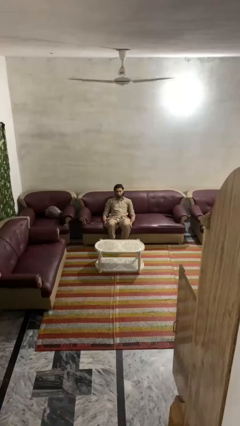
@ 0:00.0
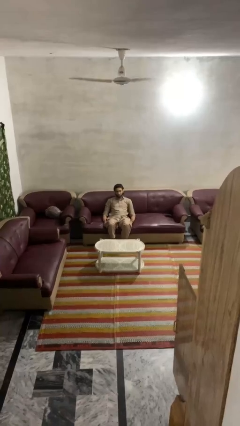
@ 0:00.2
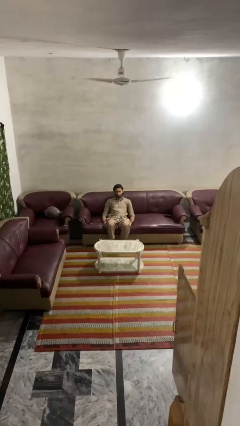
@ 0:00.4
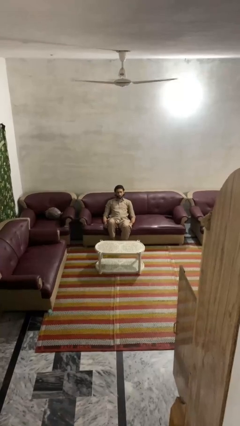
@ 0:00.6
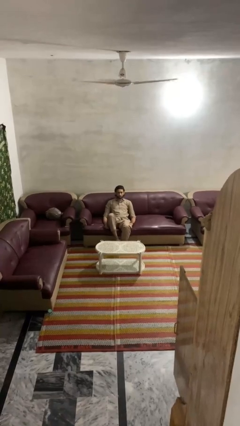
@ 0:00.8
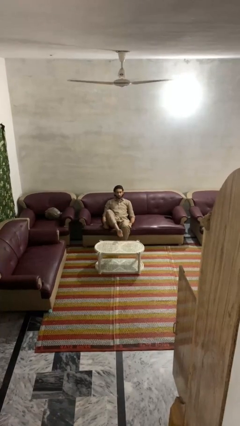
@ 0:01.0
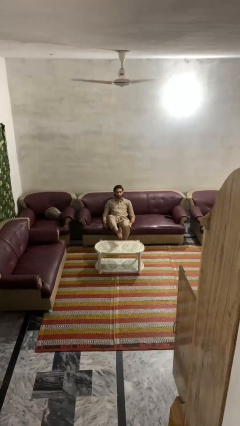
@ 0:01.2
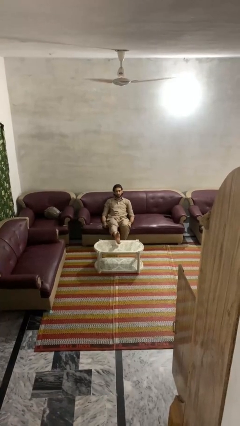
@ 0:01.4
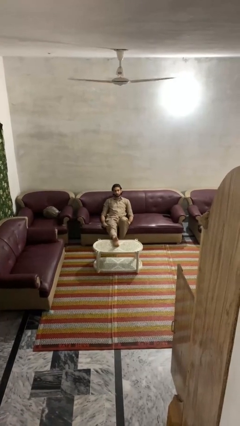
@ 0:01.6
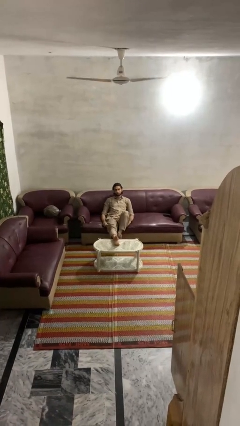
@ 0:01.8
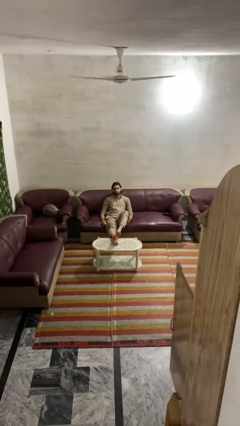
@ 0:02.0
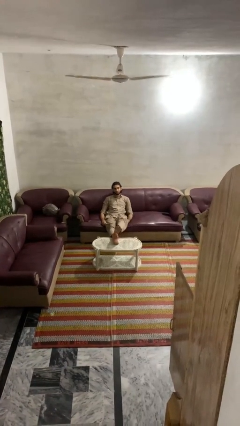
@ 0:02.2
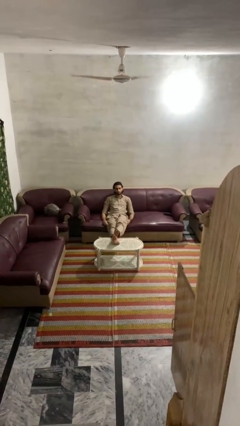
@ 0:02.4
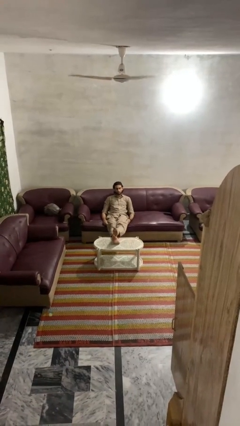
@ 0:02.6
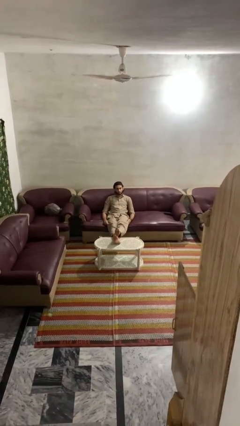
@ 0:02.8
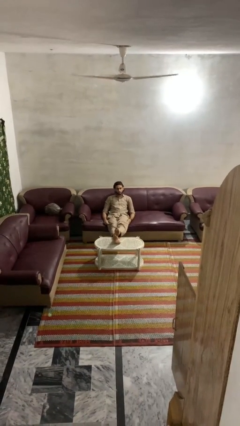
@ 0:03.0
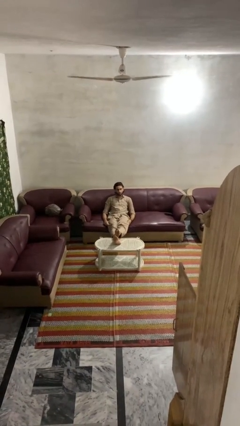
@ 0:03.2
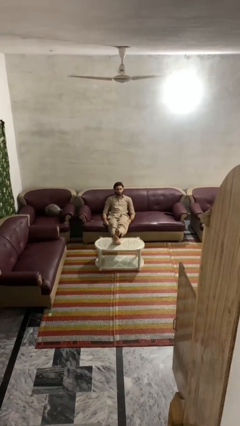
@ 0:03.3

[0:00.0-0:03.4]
person puts feet up

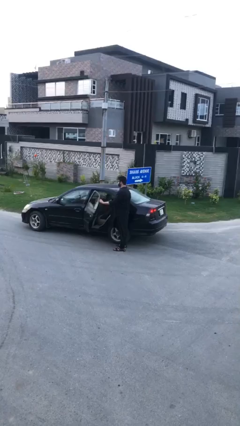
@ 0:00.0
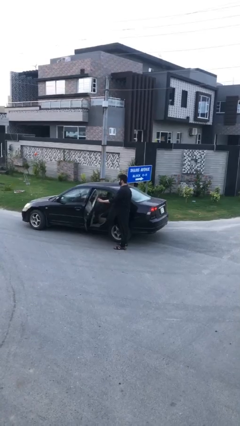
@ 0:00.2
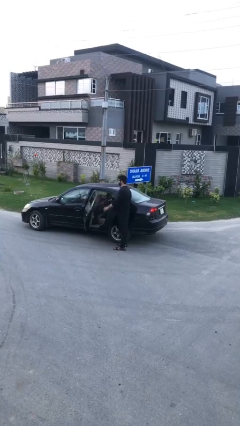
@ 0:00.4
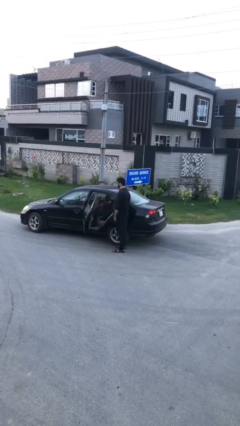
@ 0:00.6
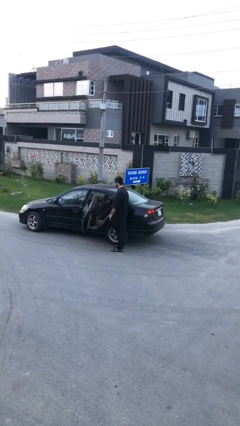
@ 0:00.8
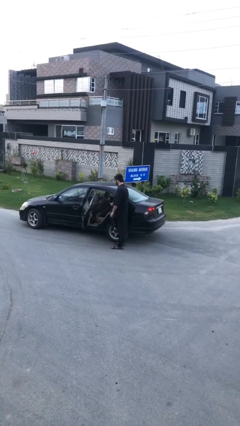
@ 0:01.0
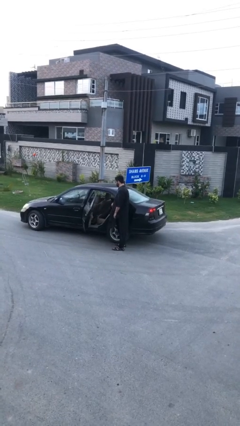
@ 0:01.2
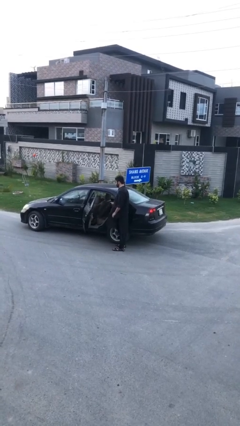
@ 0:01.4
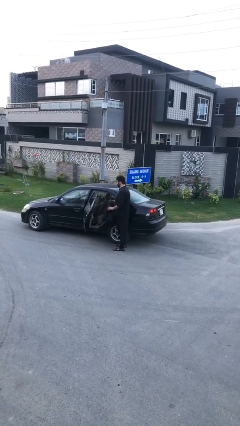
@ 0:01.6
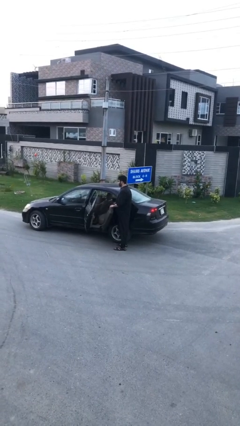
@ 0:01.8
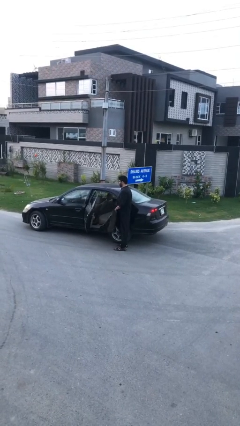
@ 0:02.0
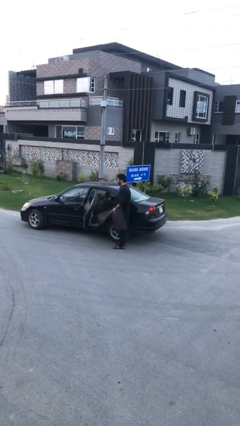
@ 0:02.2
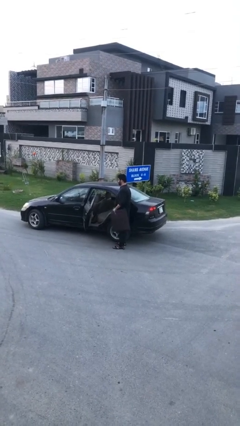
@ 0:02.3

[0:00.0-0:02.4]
person unloads car

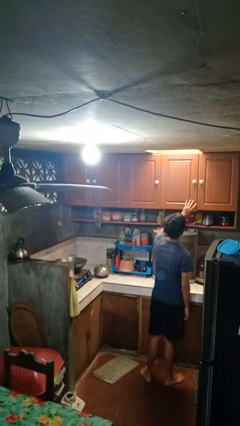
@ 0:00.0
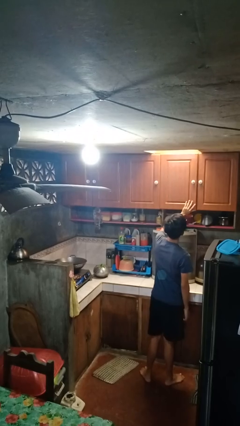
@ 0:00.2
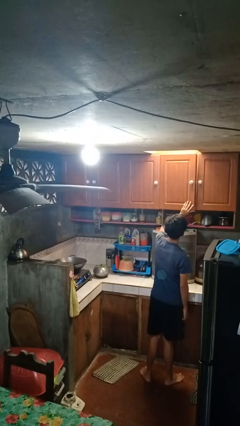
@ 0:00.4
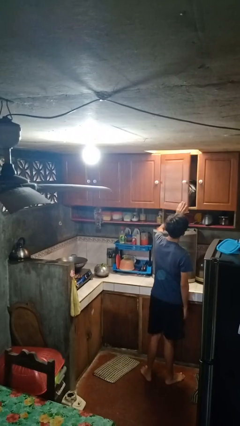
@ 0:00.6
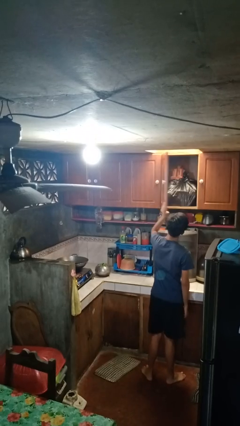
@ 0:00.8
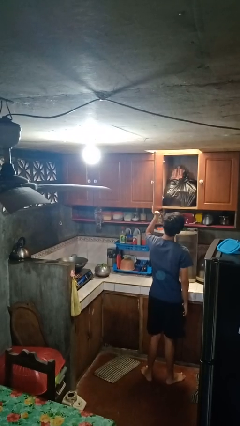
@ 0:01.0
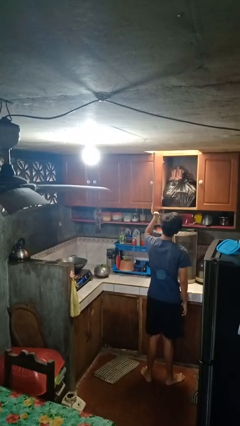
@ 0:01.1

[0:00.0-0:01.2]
person opens cabinet

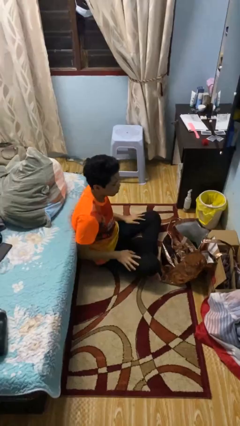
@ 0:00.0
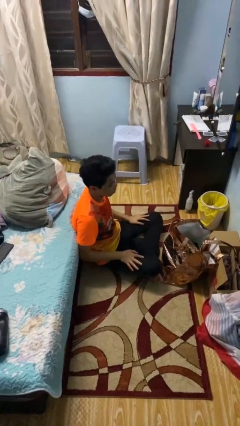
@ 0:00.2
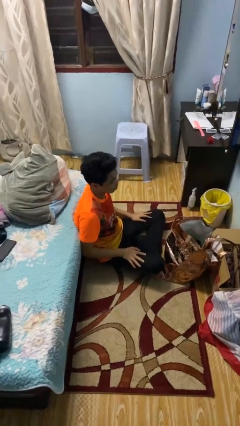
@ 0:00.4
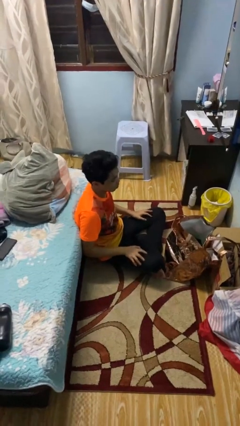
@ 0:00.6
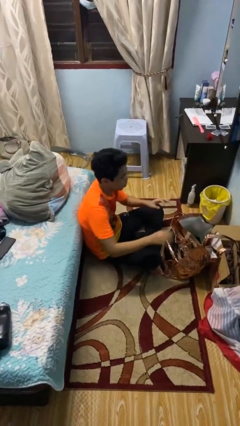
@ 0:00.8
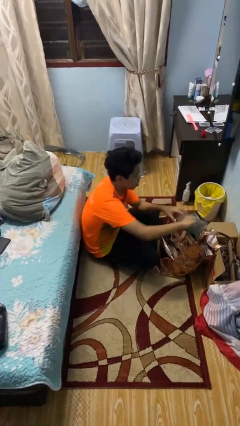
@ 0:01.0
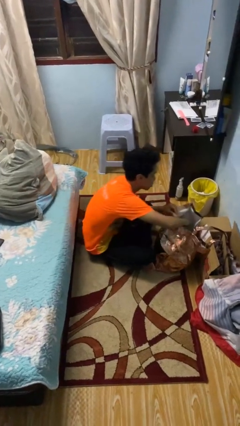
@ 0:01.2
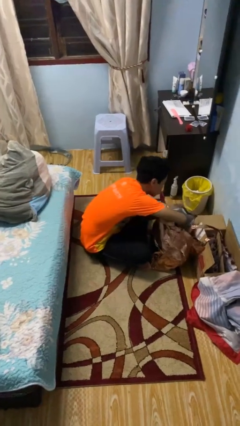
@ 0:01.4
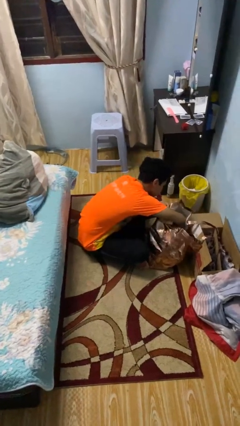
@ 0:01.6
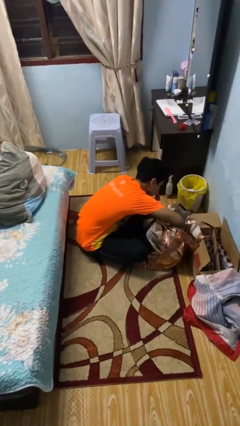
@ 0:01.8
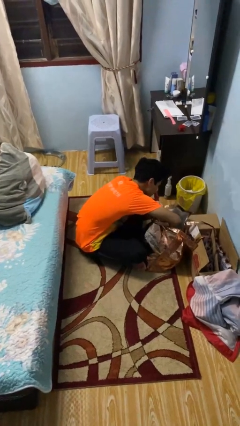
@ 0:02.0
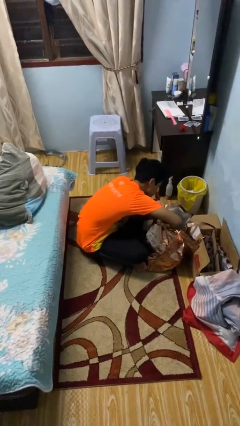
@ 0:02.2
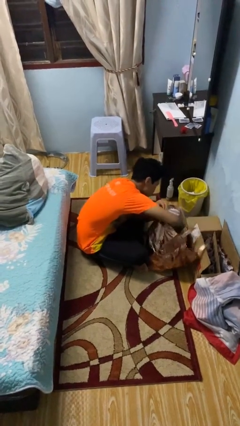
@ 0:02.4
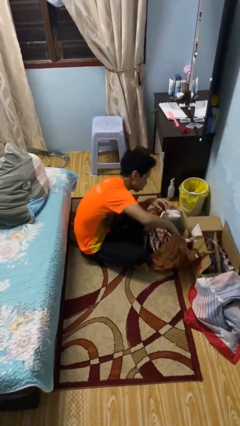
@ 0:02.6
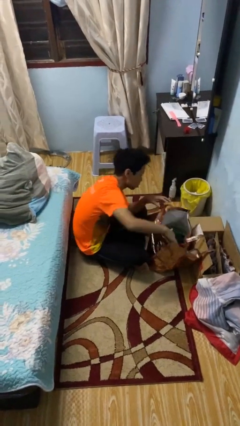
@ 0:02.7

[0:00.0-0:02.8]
person searches in bag

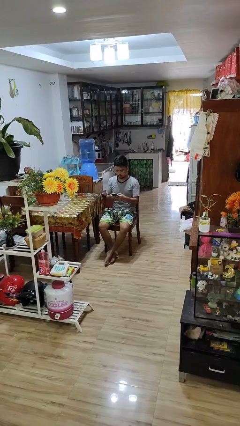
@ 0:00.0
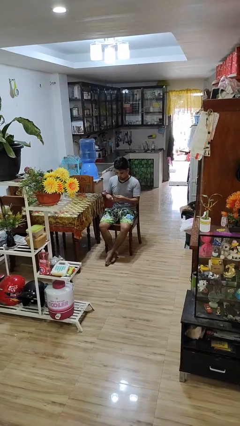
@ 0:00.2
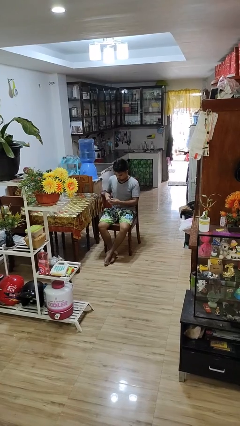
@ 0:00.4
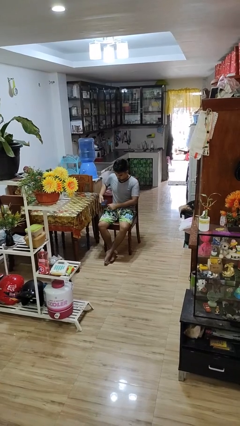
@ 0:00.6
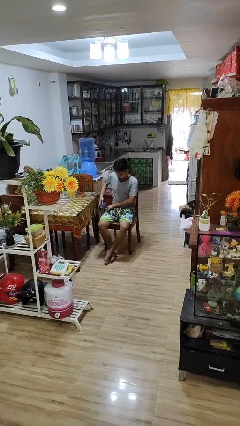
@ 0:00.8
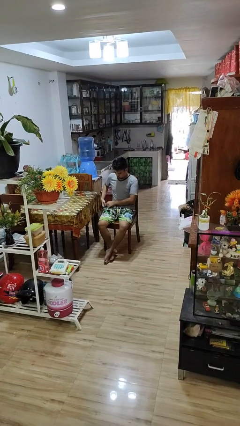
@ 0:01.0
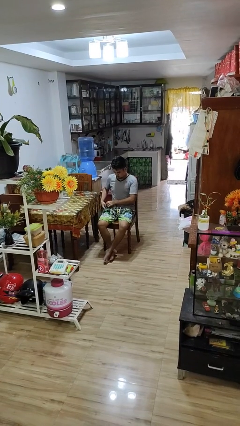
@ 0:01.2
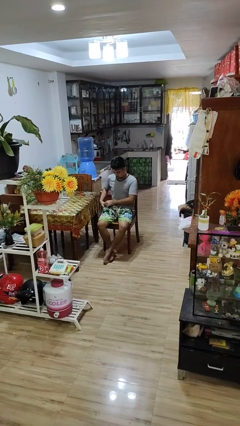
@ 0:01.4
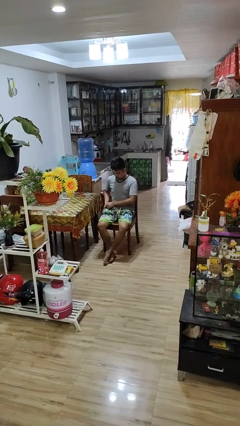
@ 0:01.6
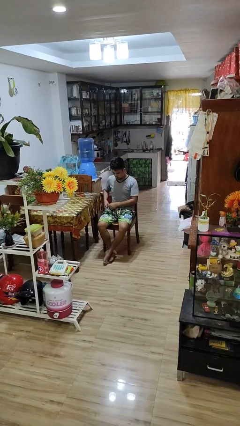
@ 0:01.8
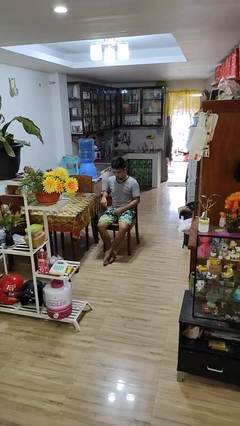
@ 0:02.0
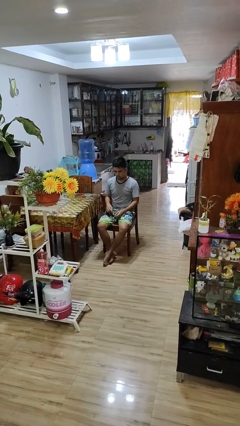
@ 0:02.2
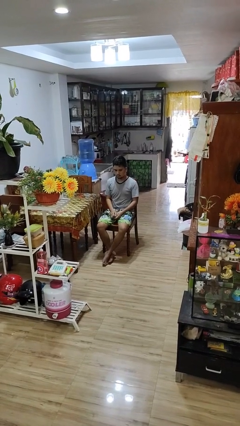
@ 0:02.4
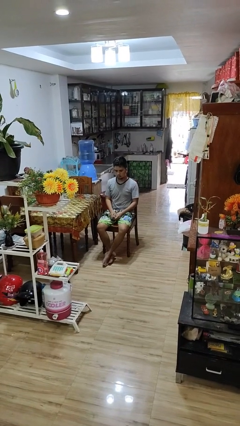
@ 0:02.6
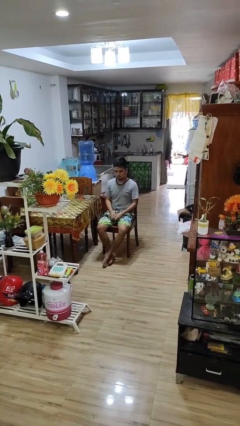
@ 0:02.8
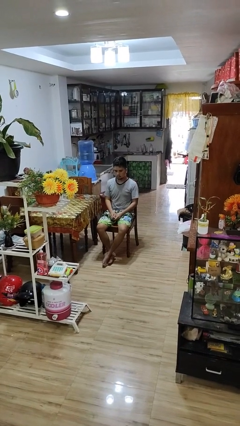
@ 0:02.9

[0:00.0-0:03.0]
person puts phone into pocket

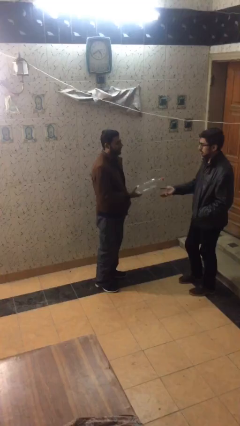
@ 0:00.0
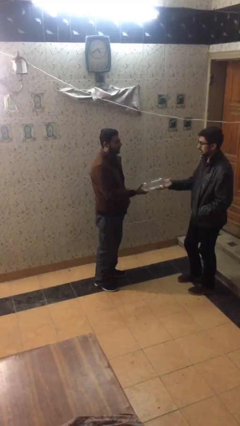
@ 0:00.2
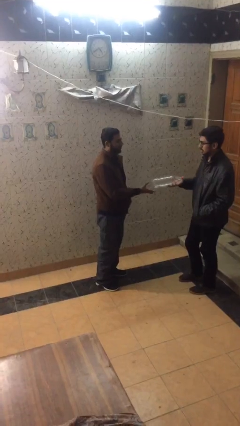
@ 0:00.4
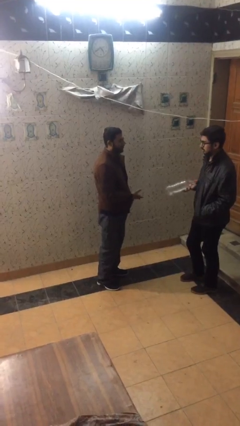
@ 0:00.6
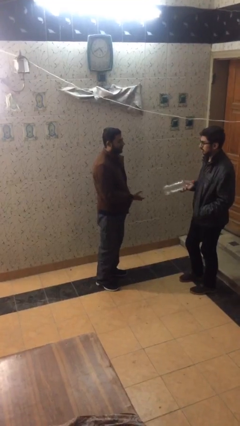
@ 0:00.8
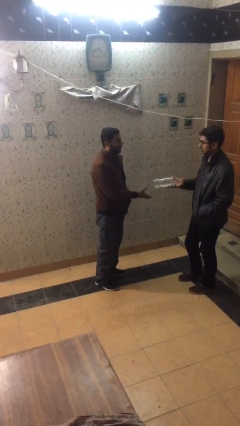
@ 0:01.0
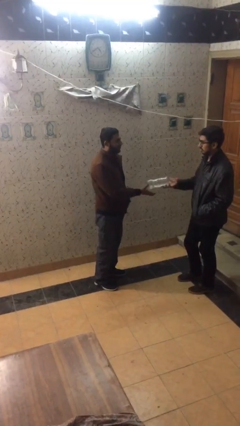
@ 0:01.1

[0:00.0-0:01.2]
person transfers object to person

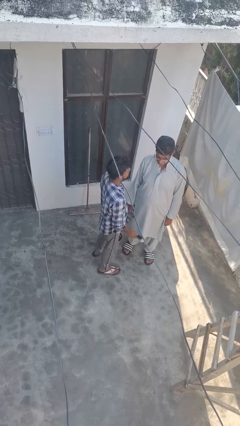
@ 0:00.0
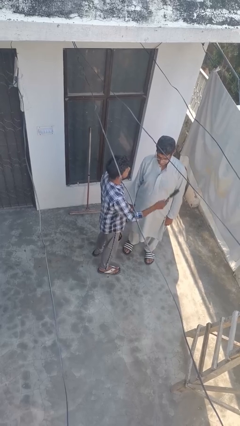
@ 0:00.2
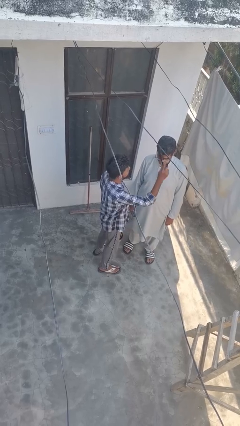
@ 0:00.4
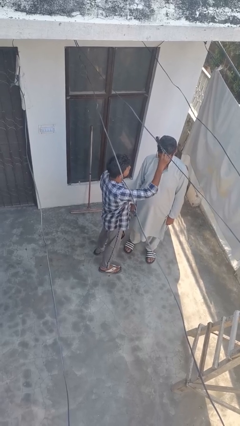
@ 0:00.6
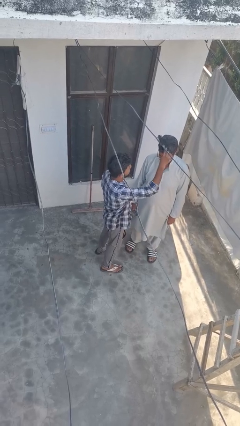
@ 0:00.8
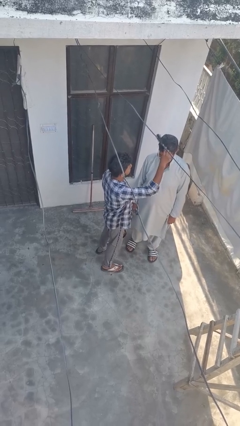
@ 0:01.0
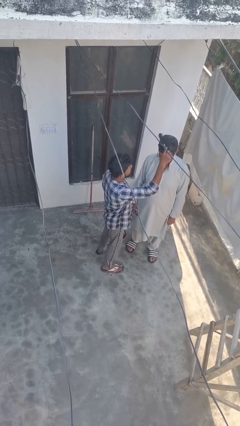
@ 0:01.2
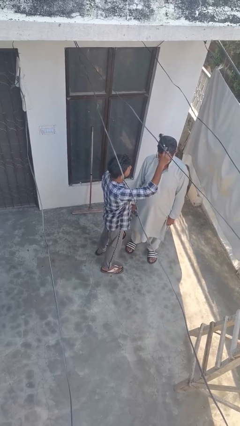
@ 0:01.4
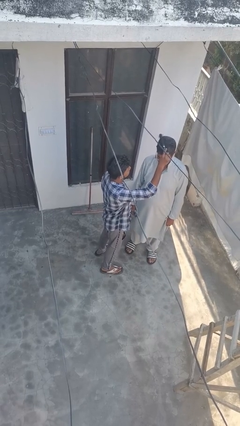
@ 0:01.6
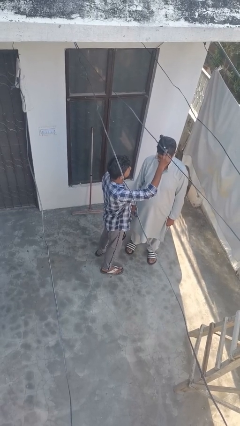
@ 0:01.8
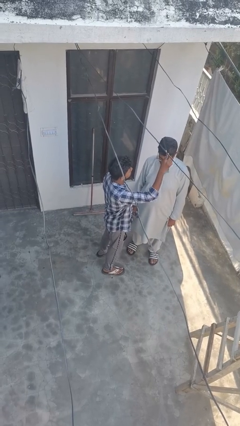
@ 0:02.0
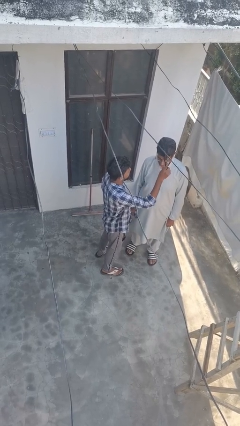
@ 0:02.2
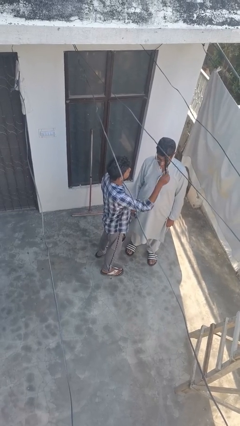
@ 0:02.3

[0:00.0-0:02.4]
person brushes hair of person

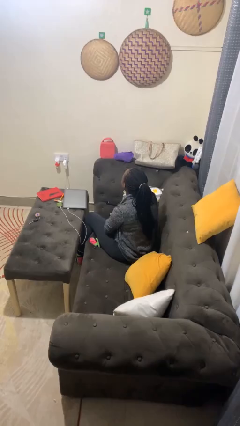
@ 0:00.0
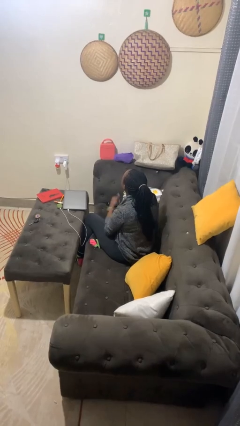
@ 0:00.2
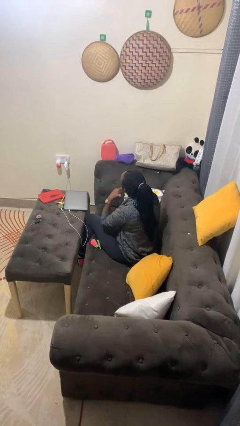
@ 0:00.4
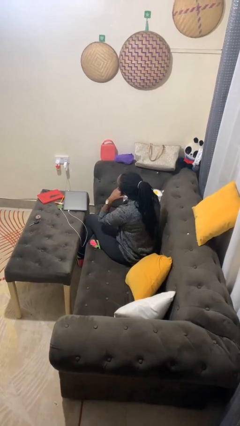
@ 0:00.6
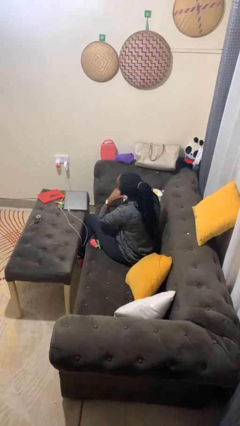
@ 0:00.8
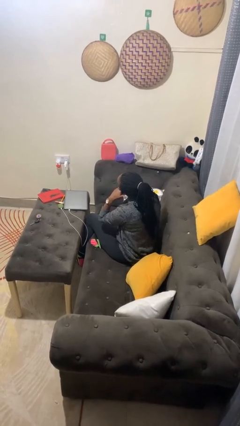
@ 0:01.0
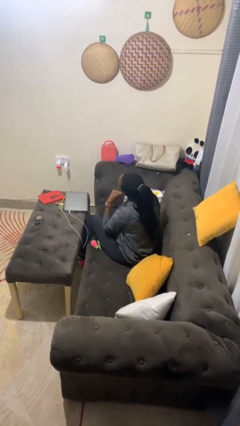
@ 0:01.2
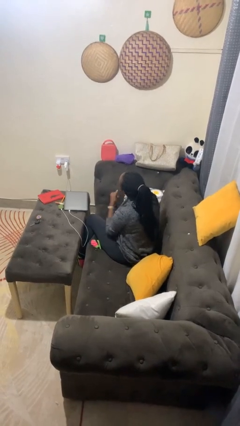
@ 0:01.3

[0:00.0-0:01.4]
person gestures call me
